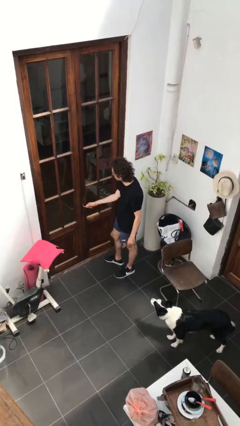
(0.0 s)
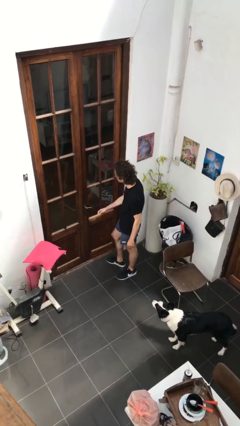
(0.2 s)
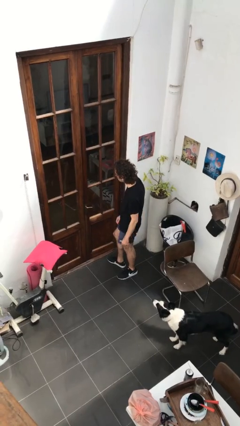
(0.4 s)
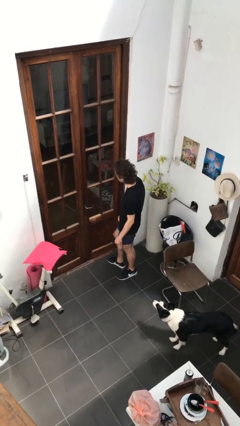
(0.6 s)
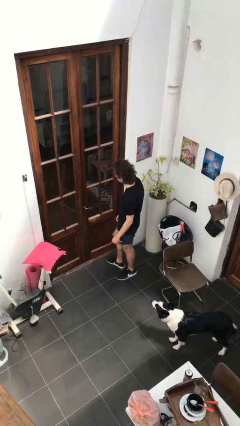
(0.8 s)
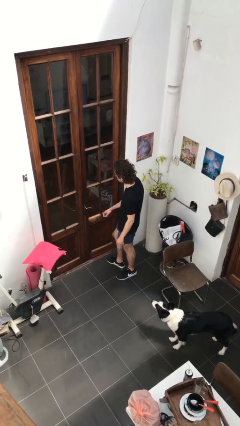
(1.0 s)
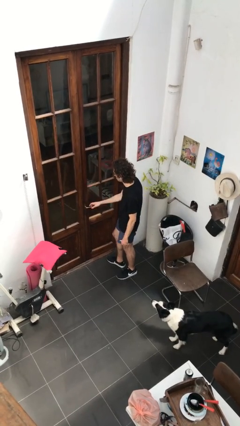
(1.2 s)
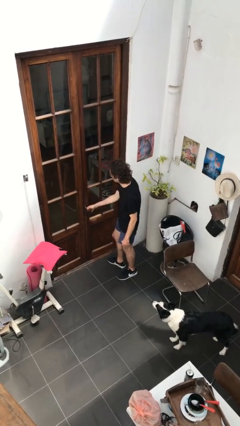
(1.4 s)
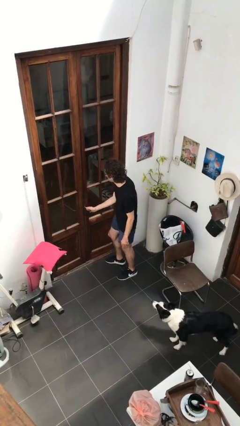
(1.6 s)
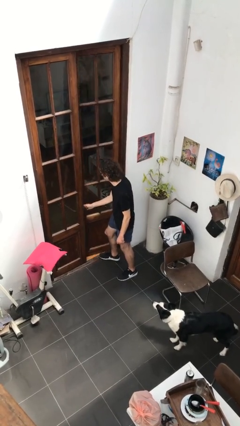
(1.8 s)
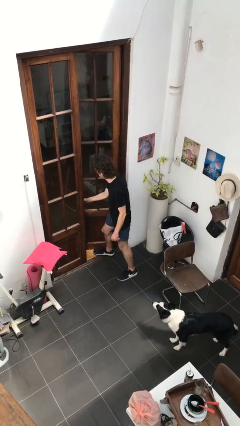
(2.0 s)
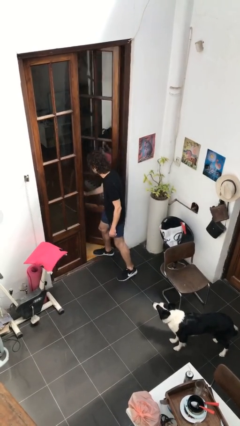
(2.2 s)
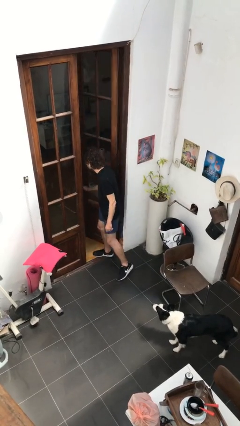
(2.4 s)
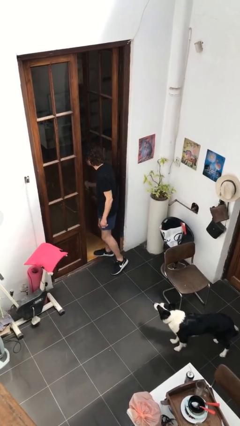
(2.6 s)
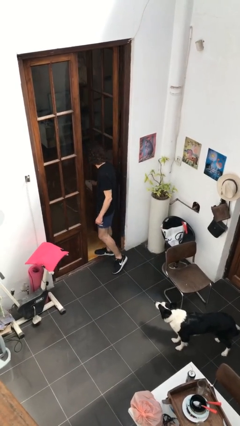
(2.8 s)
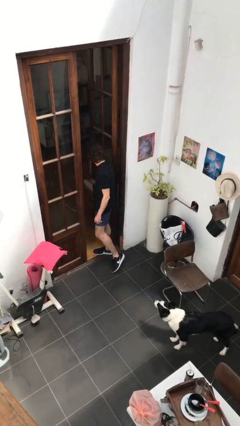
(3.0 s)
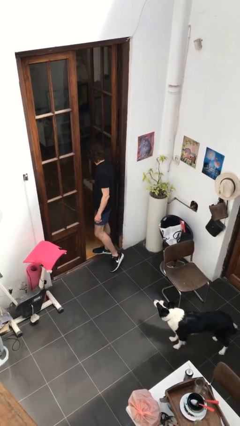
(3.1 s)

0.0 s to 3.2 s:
person opens facility door

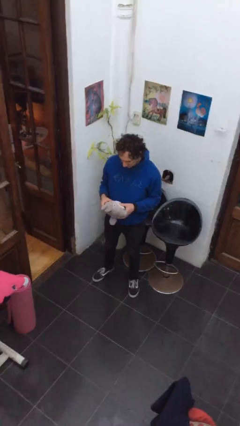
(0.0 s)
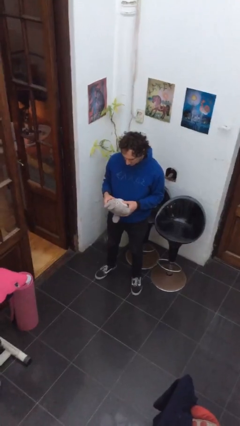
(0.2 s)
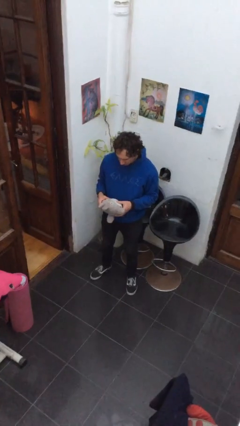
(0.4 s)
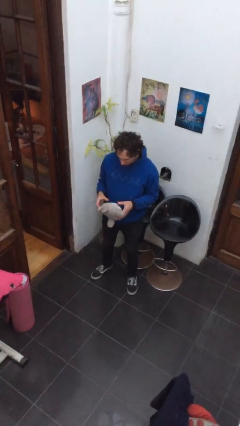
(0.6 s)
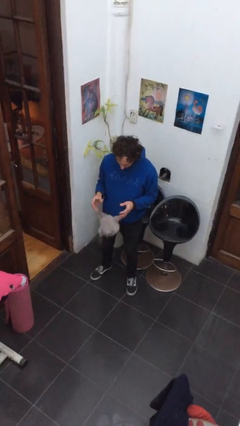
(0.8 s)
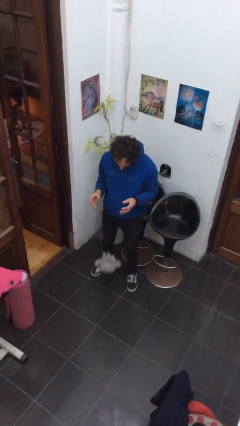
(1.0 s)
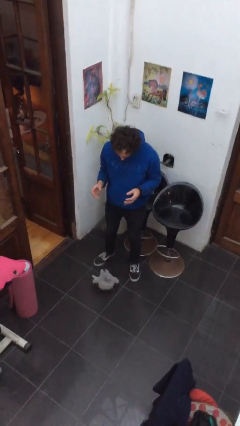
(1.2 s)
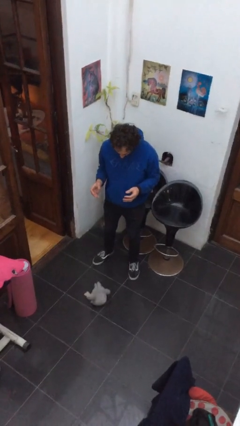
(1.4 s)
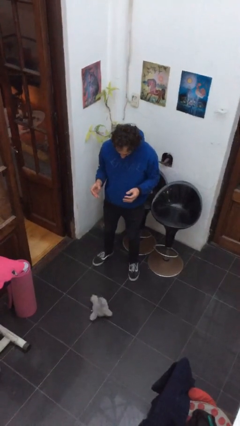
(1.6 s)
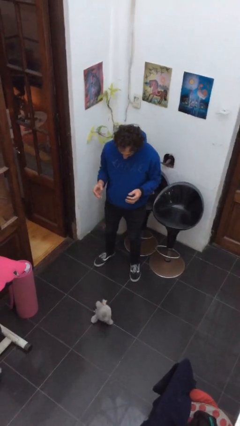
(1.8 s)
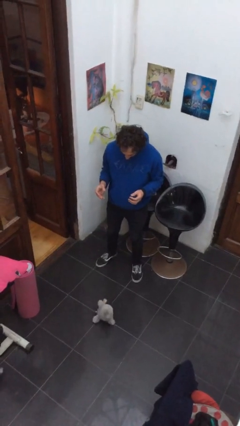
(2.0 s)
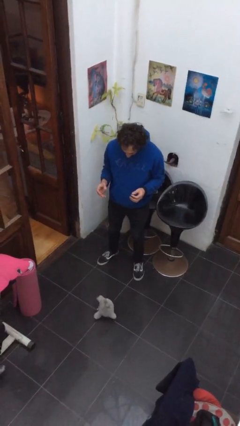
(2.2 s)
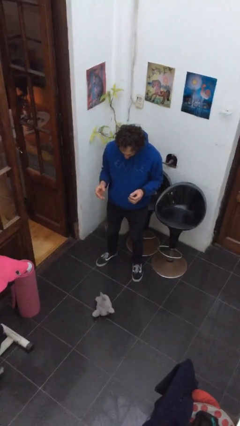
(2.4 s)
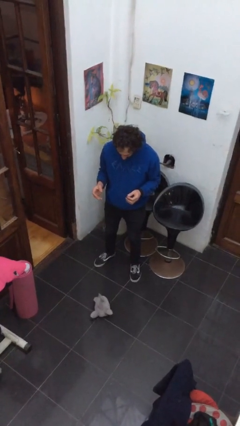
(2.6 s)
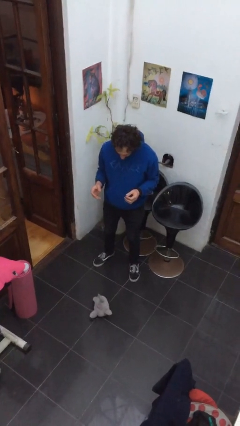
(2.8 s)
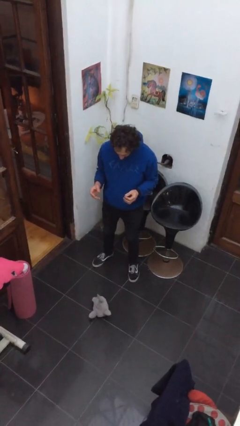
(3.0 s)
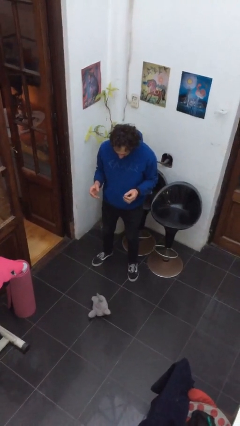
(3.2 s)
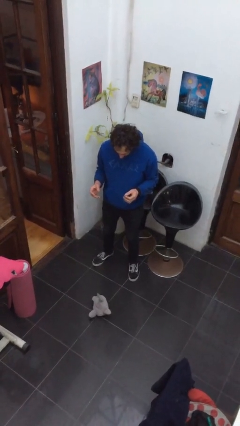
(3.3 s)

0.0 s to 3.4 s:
person drops object

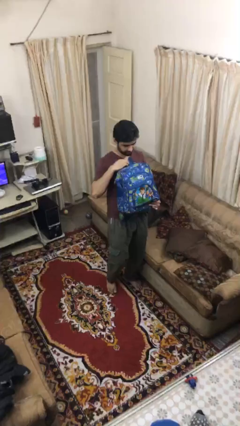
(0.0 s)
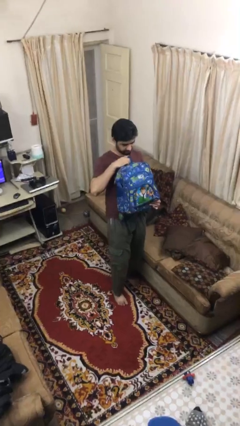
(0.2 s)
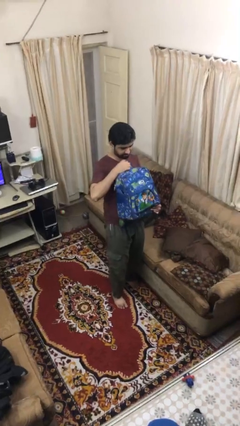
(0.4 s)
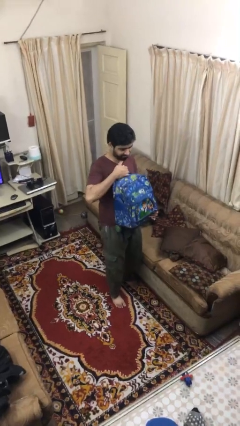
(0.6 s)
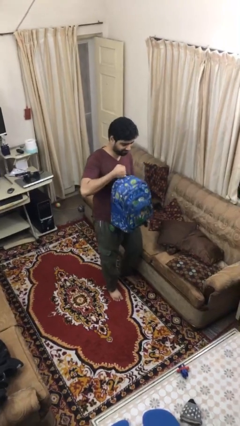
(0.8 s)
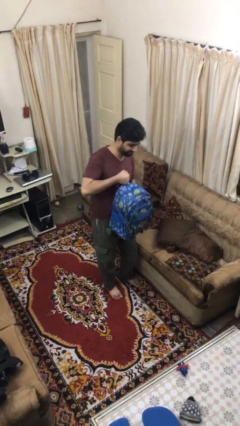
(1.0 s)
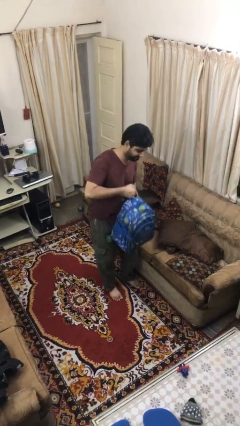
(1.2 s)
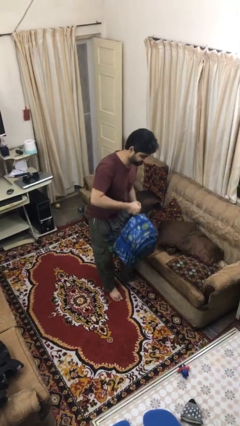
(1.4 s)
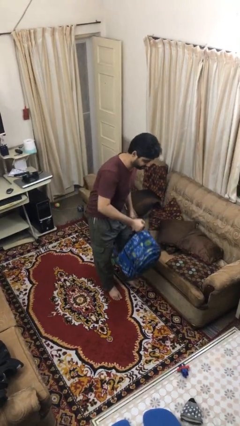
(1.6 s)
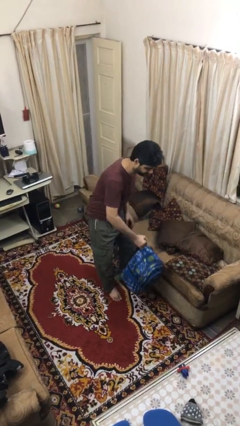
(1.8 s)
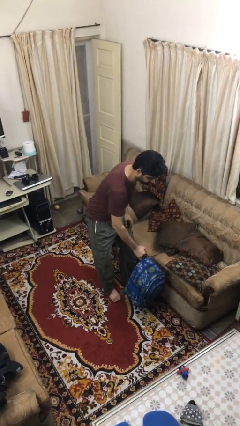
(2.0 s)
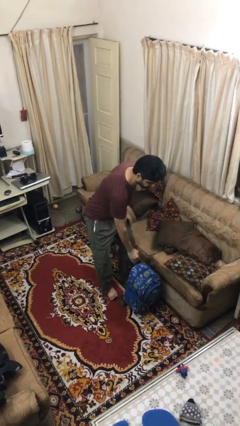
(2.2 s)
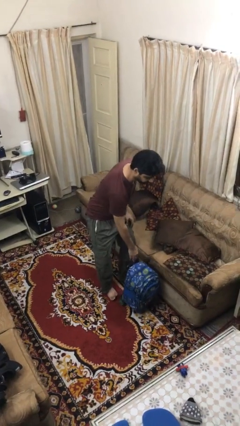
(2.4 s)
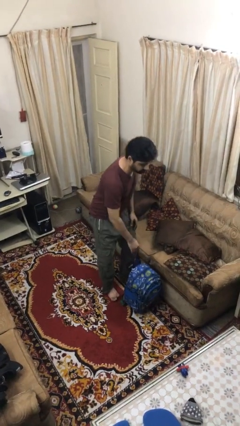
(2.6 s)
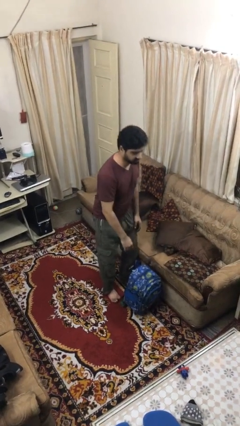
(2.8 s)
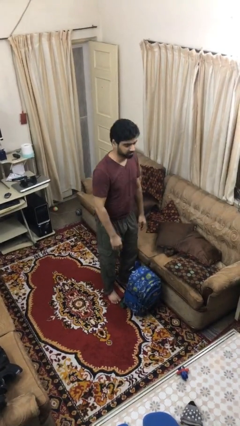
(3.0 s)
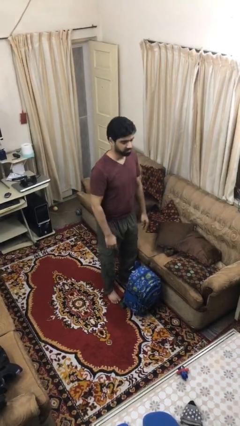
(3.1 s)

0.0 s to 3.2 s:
person puts down object on floor

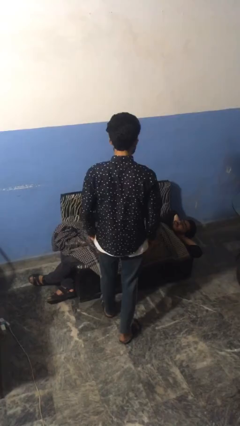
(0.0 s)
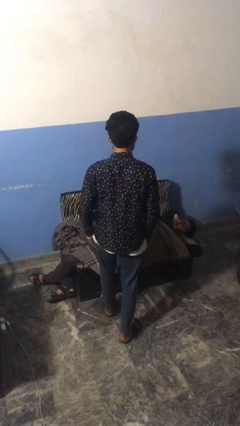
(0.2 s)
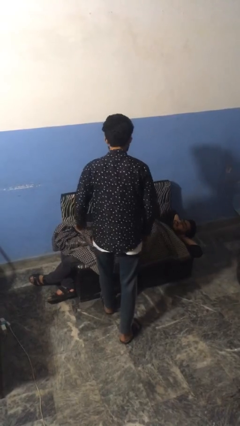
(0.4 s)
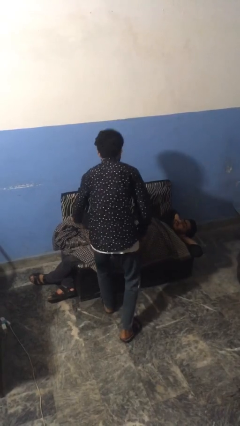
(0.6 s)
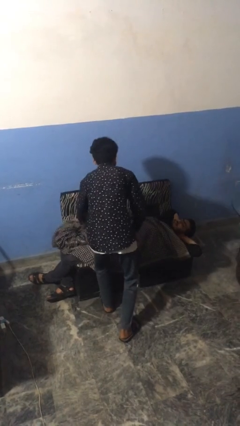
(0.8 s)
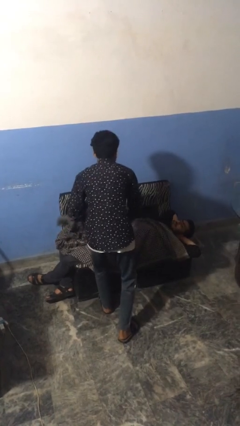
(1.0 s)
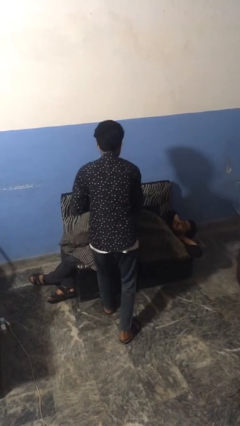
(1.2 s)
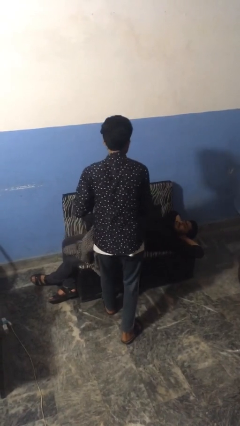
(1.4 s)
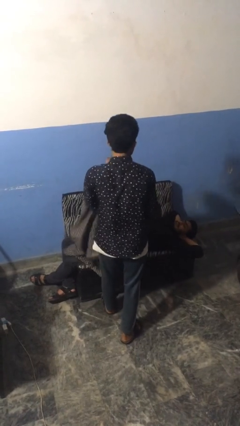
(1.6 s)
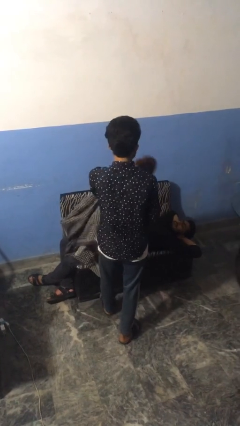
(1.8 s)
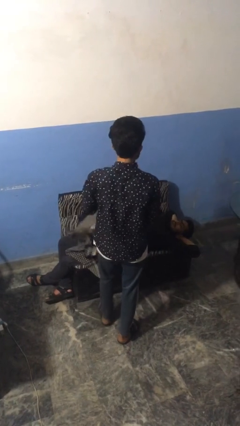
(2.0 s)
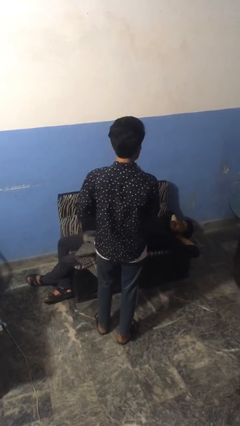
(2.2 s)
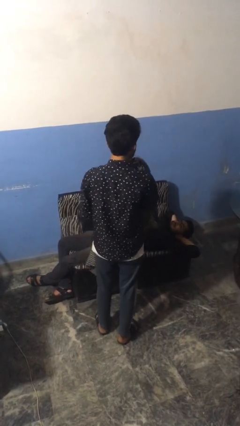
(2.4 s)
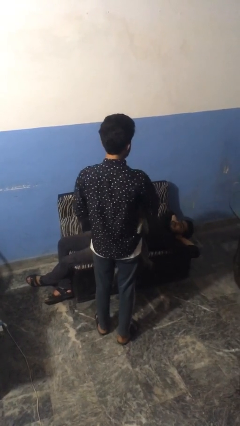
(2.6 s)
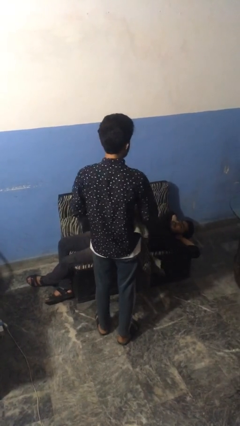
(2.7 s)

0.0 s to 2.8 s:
person uncovers friend with blanket

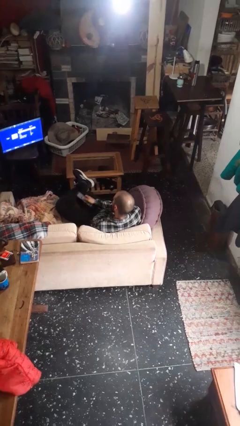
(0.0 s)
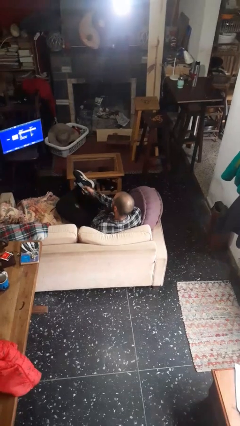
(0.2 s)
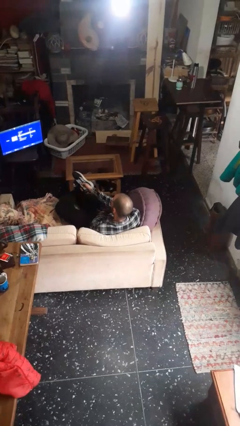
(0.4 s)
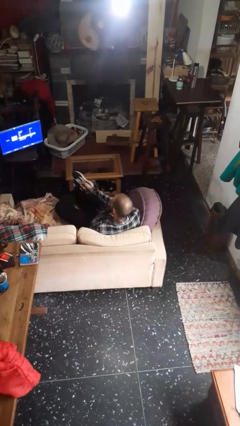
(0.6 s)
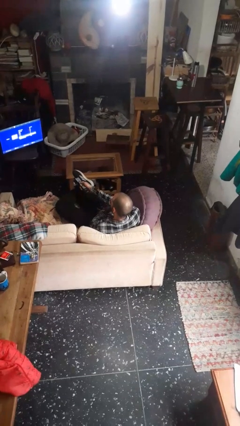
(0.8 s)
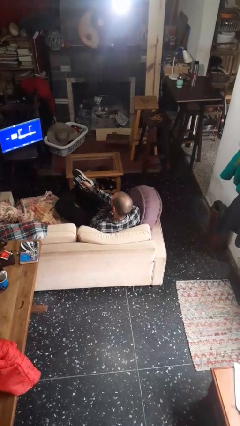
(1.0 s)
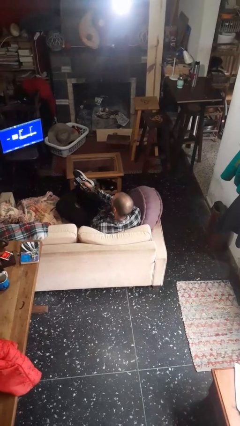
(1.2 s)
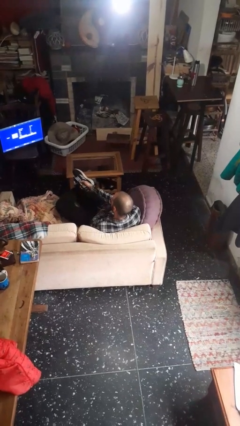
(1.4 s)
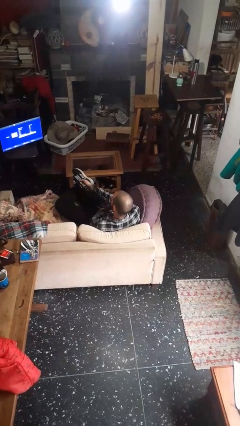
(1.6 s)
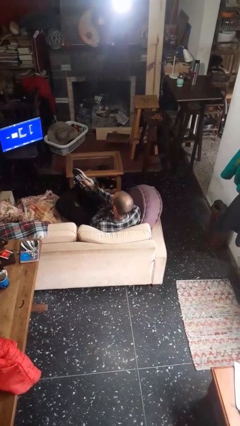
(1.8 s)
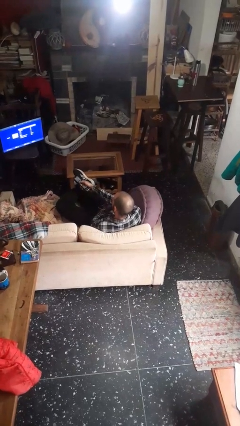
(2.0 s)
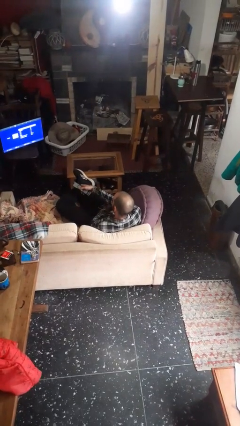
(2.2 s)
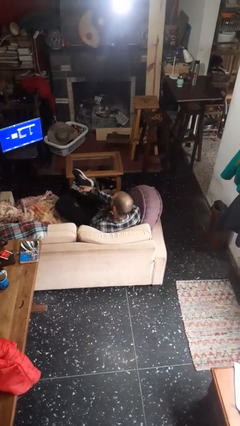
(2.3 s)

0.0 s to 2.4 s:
person uses television remote

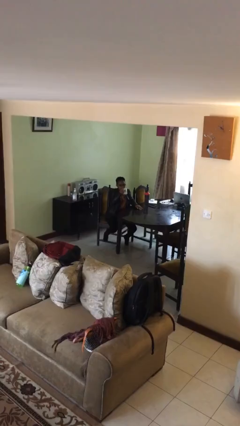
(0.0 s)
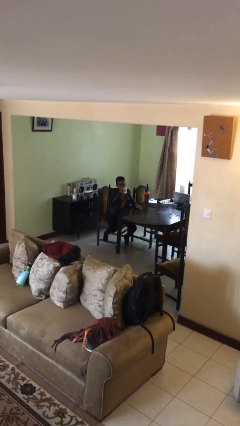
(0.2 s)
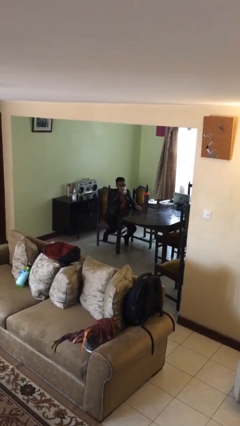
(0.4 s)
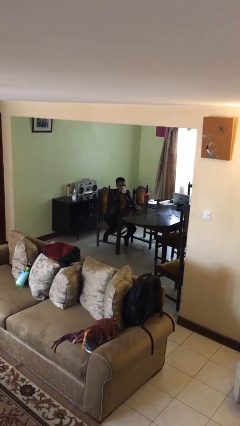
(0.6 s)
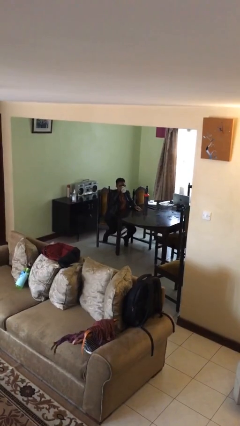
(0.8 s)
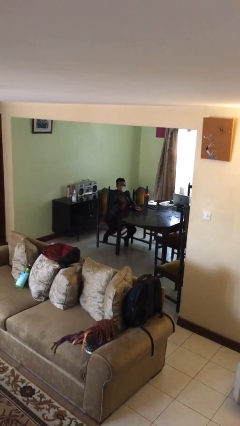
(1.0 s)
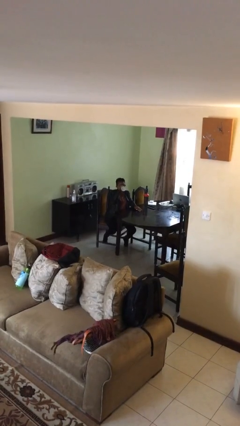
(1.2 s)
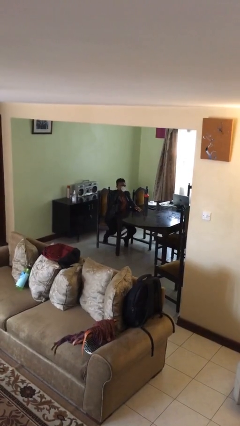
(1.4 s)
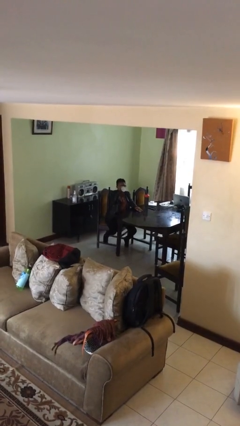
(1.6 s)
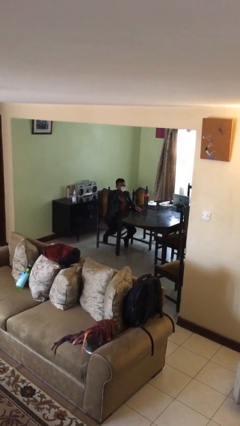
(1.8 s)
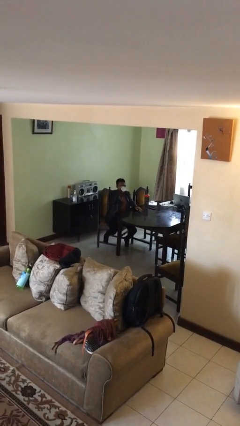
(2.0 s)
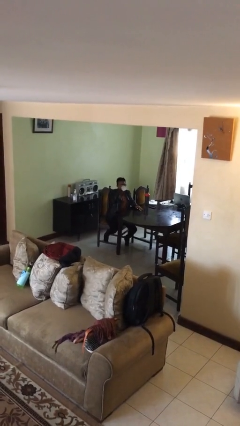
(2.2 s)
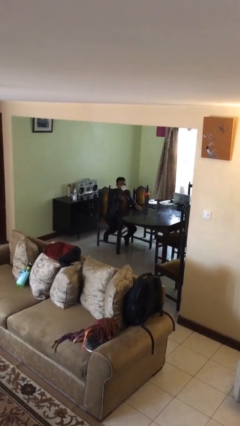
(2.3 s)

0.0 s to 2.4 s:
person drinks from mug

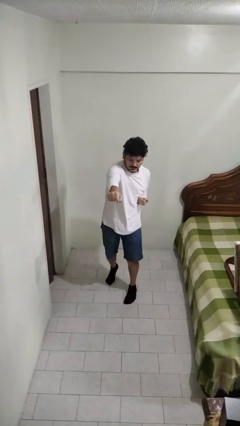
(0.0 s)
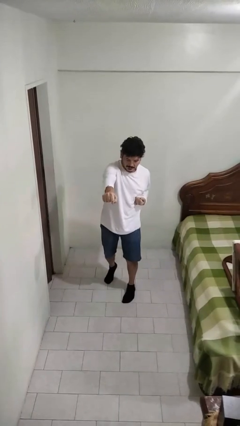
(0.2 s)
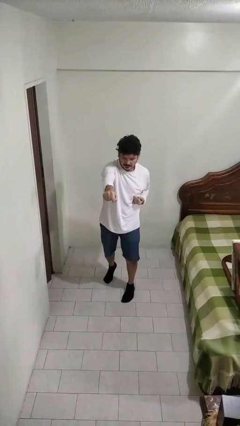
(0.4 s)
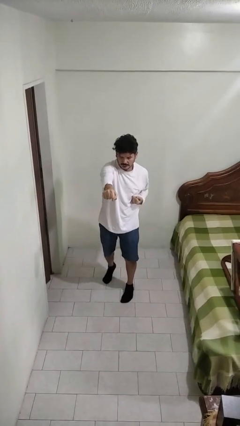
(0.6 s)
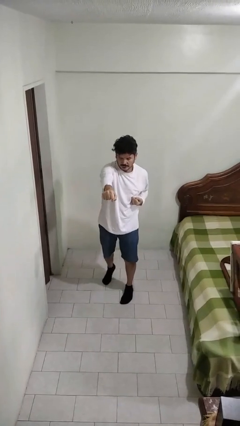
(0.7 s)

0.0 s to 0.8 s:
person karate chop
